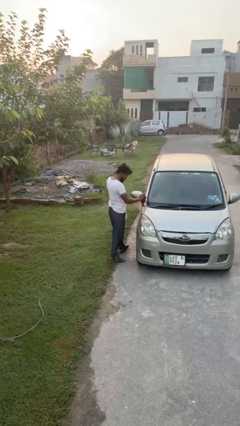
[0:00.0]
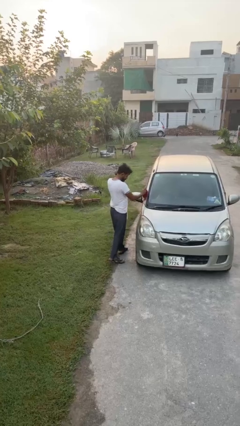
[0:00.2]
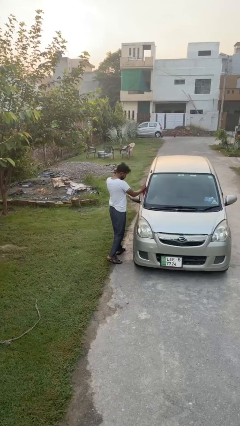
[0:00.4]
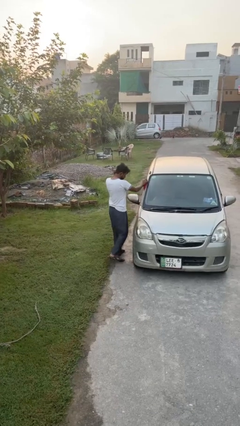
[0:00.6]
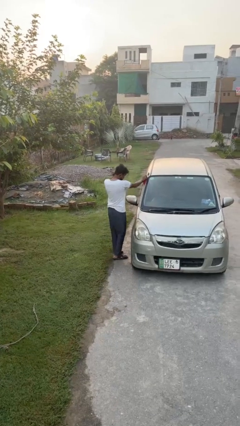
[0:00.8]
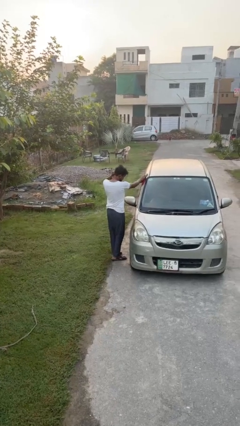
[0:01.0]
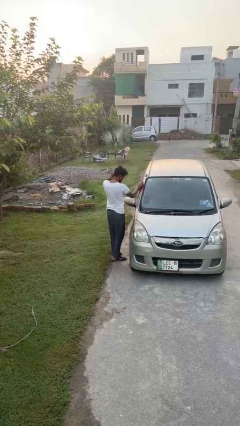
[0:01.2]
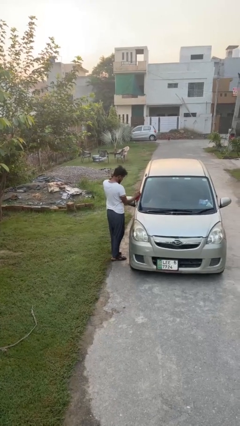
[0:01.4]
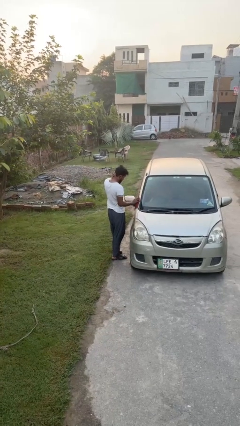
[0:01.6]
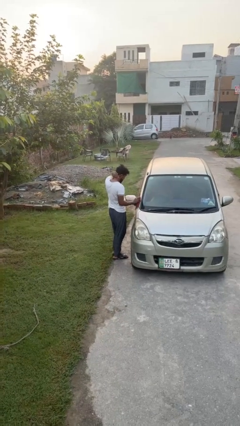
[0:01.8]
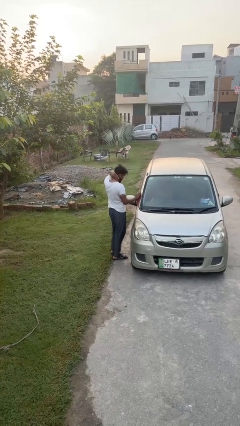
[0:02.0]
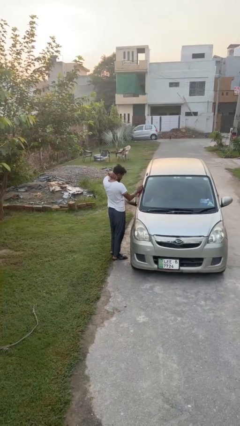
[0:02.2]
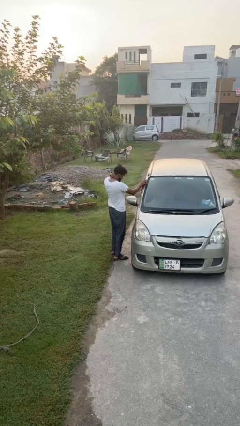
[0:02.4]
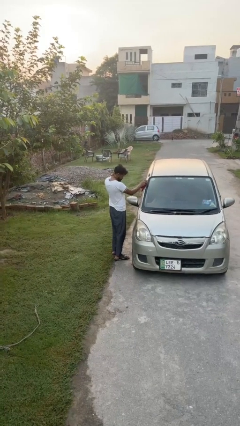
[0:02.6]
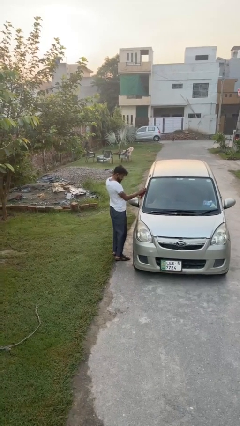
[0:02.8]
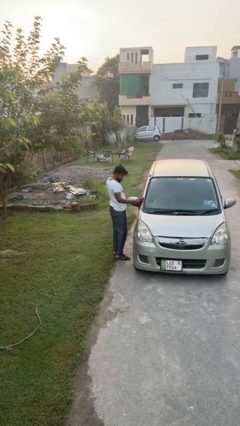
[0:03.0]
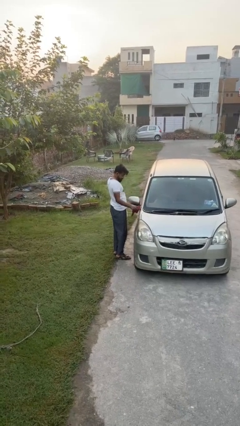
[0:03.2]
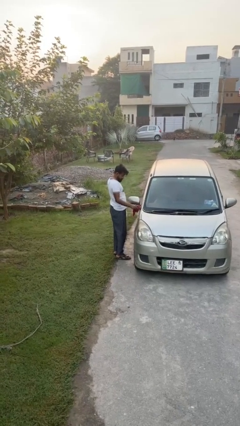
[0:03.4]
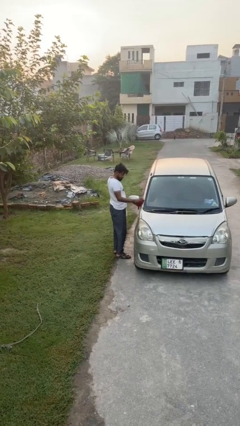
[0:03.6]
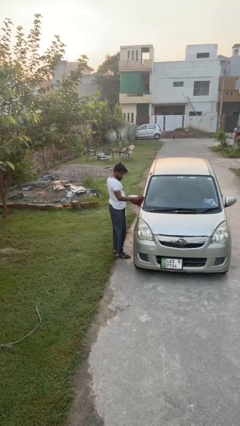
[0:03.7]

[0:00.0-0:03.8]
person polishes car with rag

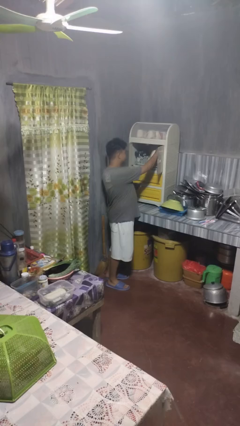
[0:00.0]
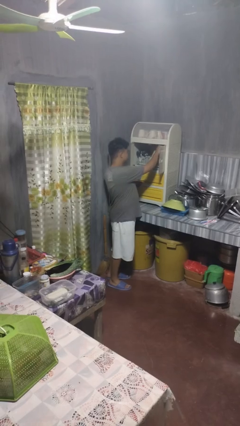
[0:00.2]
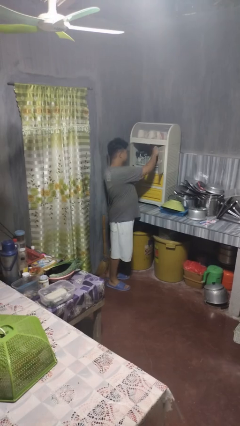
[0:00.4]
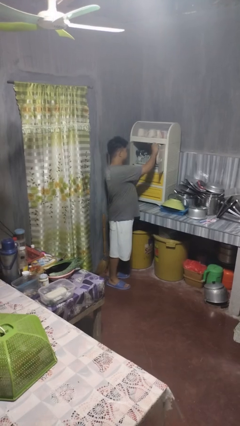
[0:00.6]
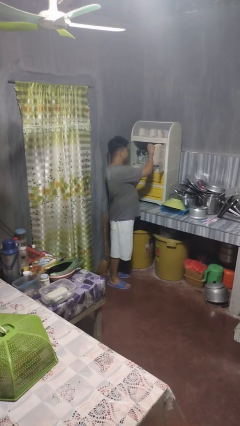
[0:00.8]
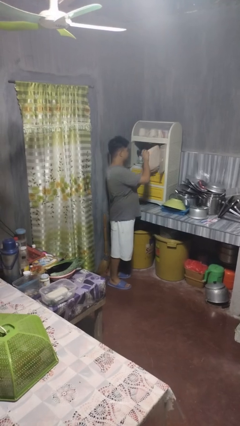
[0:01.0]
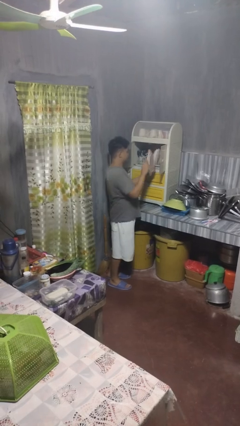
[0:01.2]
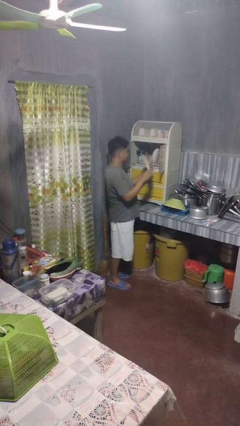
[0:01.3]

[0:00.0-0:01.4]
person takes object from cabinet

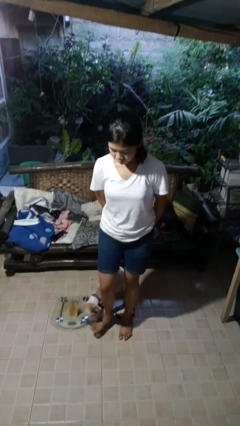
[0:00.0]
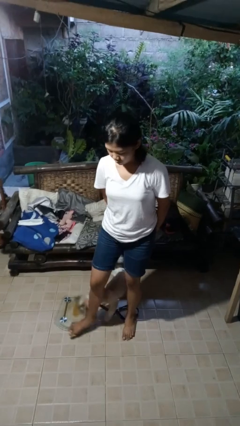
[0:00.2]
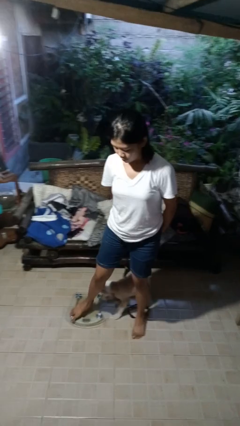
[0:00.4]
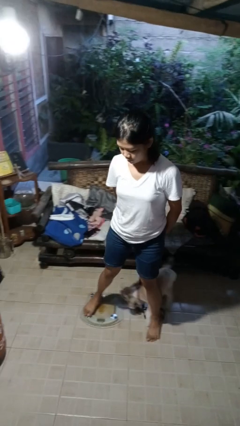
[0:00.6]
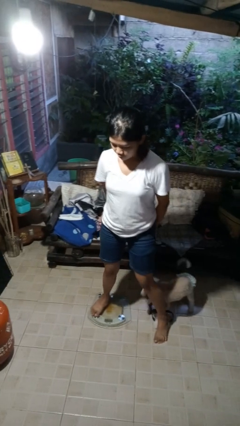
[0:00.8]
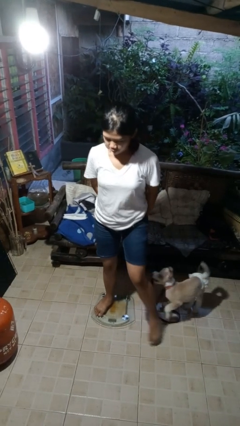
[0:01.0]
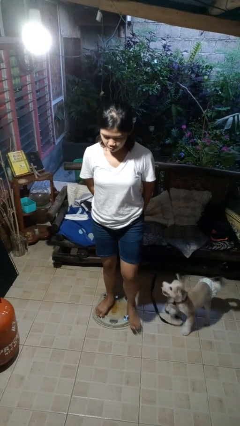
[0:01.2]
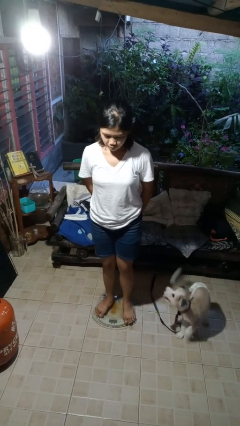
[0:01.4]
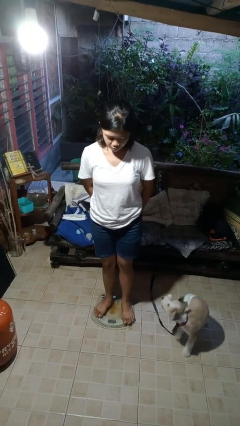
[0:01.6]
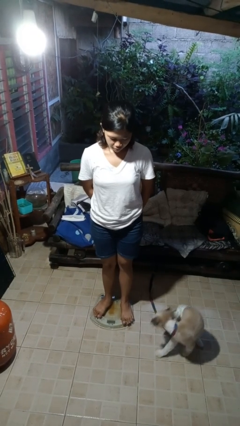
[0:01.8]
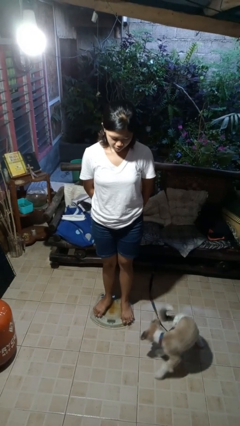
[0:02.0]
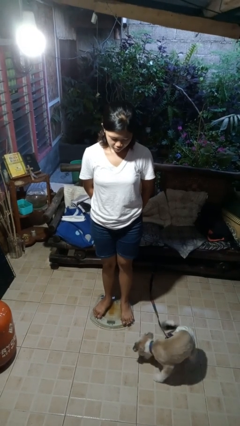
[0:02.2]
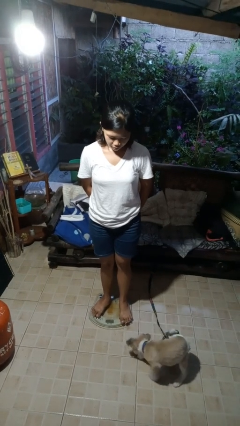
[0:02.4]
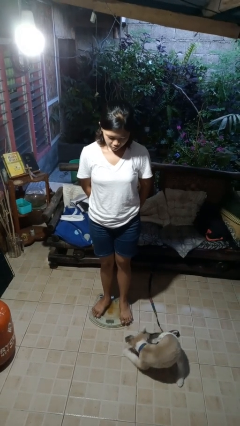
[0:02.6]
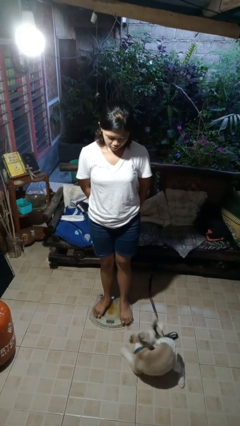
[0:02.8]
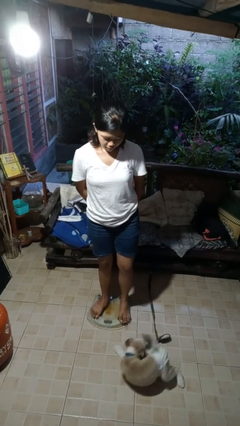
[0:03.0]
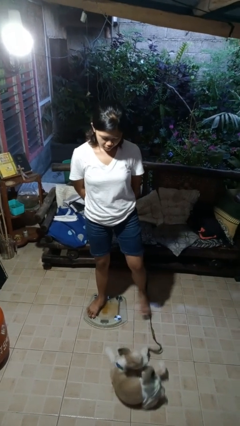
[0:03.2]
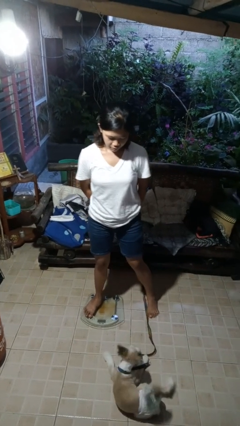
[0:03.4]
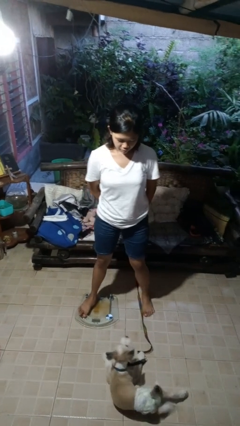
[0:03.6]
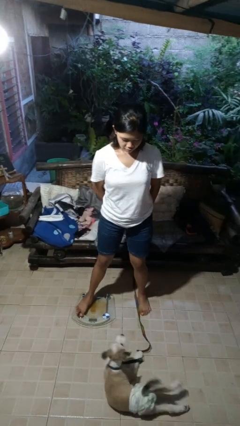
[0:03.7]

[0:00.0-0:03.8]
person uses bodyweight scale

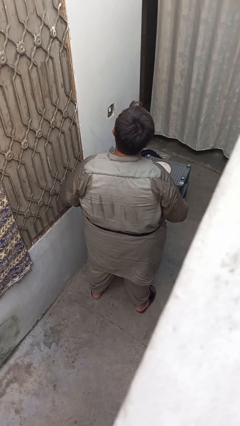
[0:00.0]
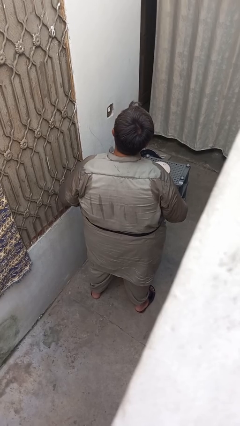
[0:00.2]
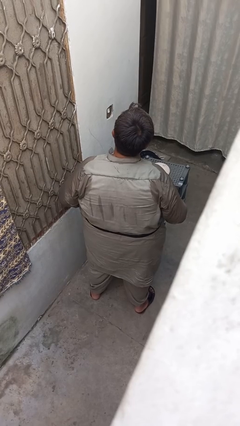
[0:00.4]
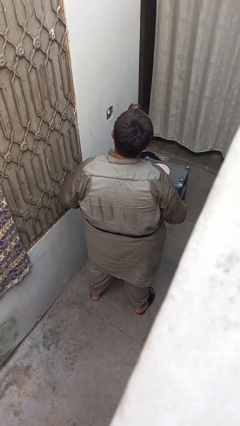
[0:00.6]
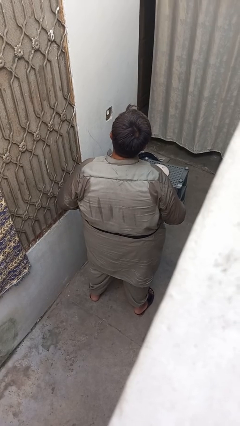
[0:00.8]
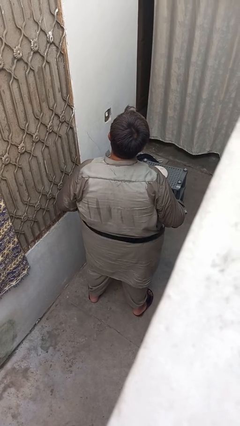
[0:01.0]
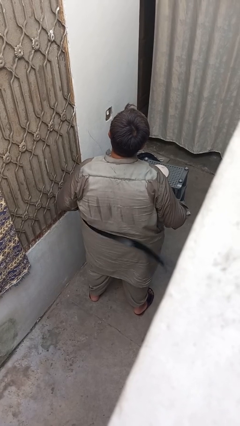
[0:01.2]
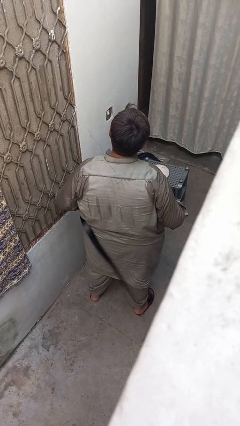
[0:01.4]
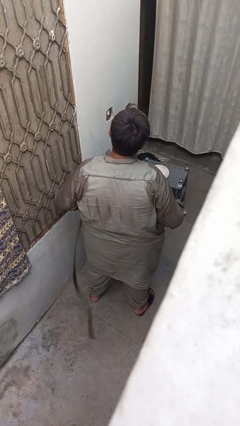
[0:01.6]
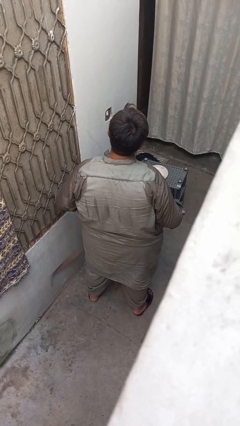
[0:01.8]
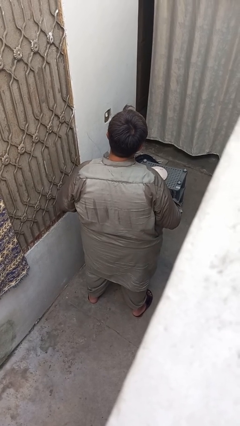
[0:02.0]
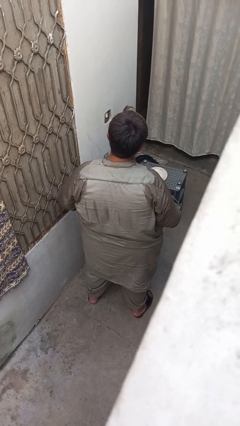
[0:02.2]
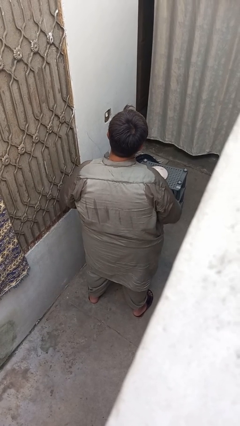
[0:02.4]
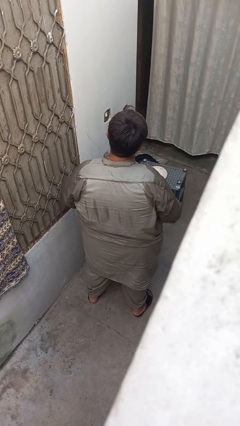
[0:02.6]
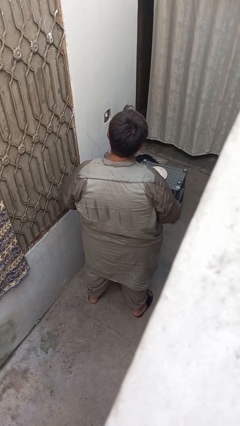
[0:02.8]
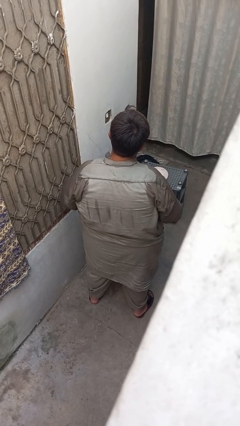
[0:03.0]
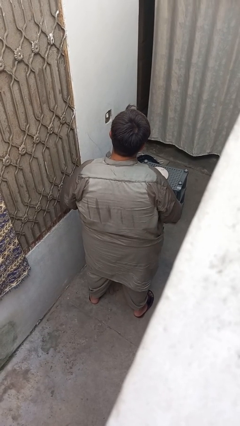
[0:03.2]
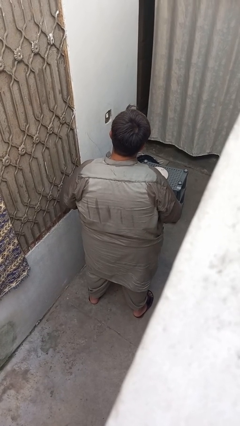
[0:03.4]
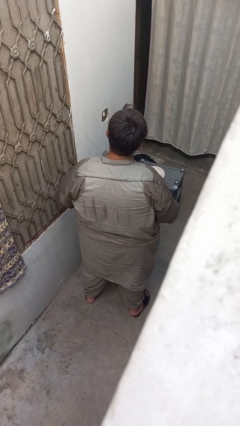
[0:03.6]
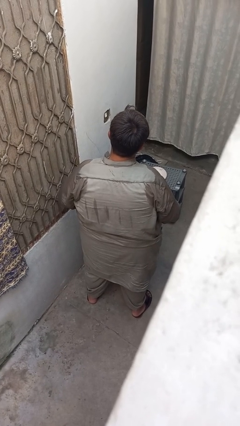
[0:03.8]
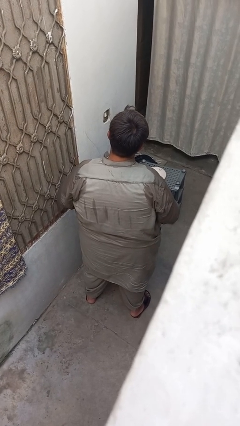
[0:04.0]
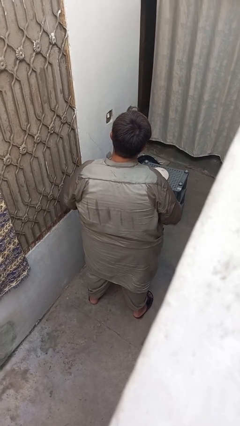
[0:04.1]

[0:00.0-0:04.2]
person takes off belt

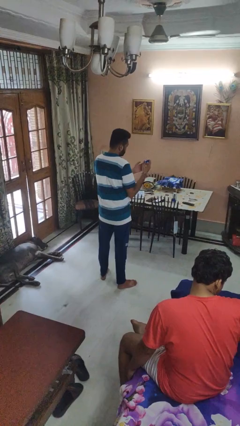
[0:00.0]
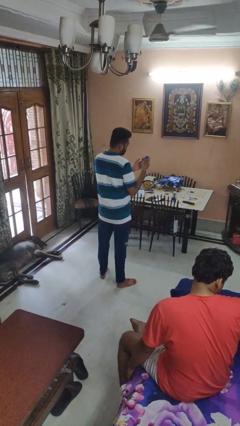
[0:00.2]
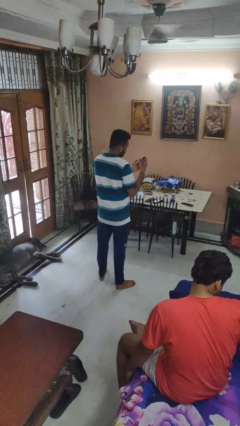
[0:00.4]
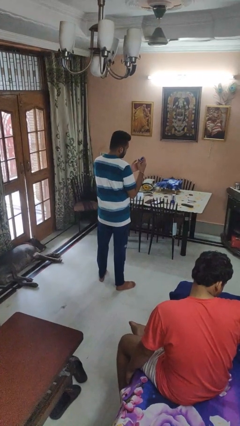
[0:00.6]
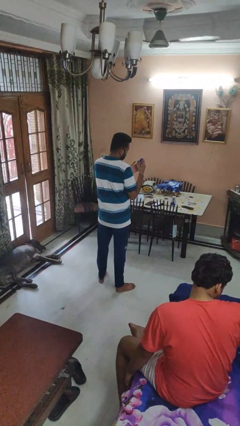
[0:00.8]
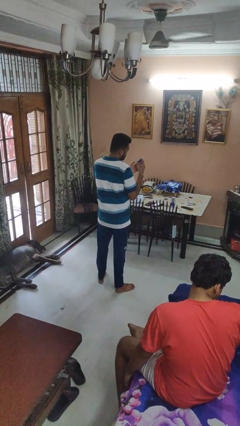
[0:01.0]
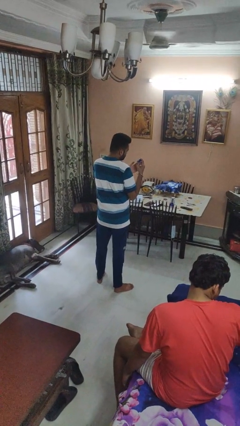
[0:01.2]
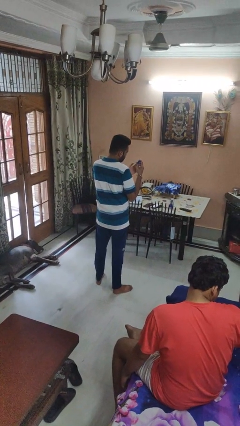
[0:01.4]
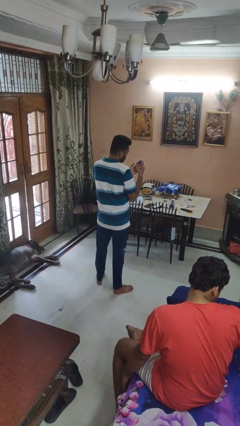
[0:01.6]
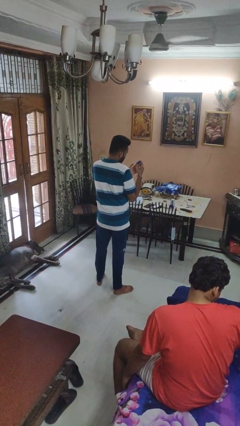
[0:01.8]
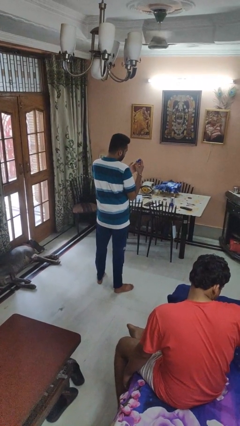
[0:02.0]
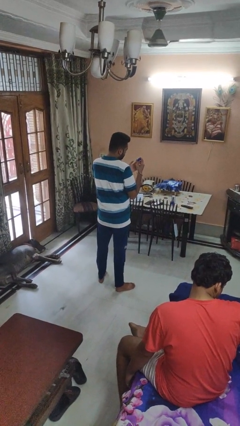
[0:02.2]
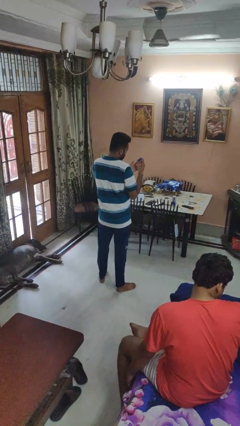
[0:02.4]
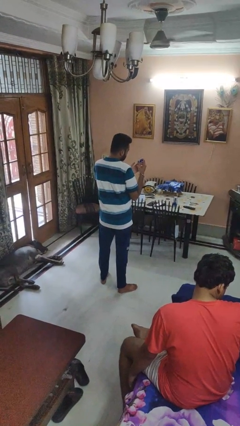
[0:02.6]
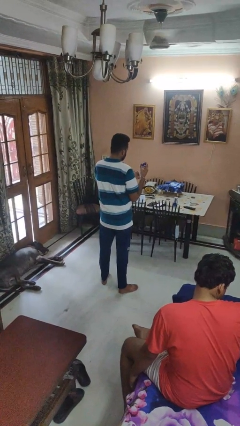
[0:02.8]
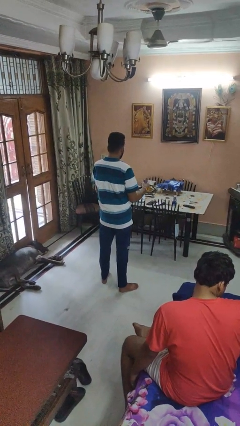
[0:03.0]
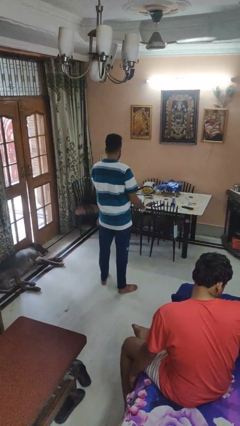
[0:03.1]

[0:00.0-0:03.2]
person clips fingernails

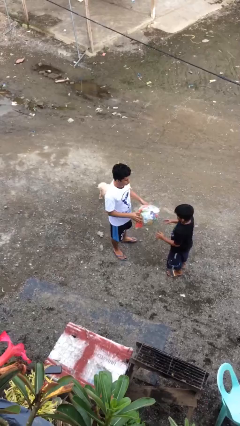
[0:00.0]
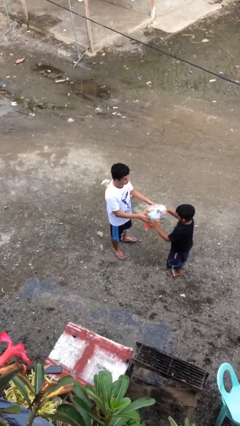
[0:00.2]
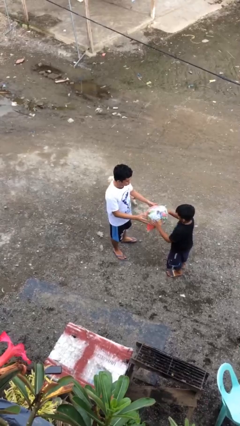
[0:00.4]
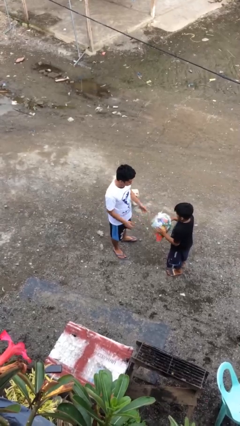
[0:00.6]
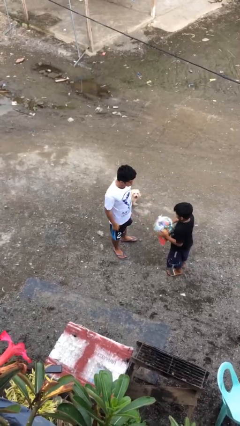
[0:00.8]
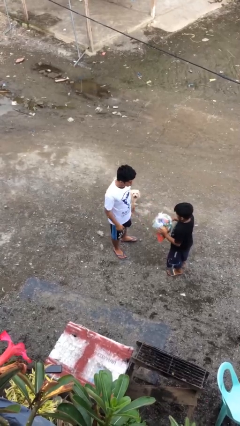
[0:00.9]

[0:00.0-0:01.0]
person transfers object to person

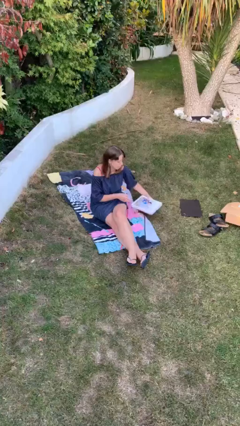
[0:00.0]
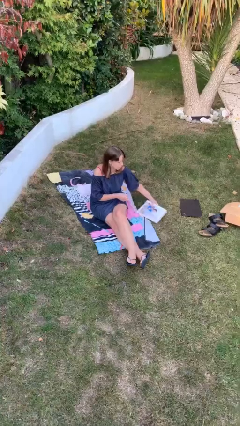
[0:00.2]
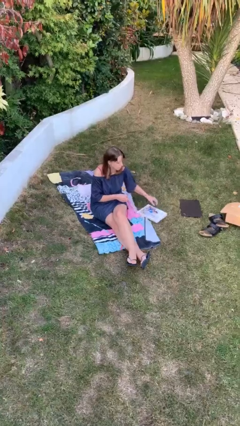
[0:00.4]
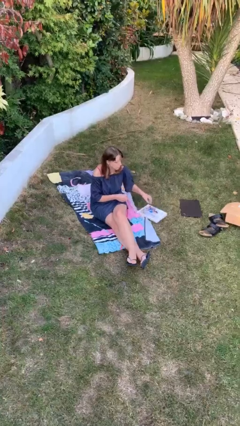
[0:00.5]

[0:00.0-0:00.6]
person puts down object on floor
